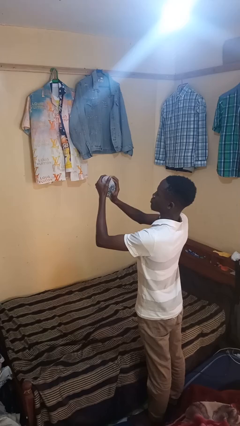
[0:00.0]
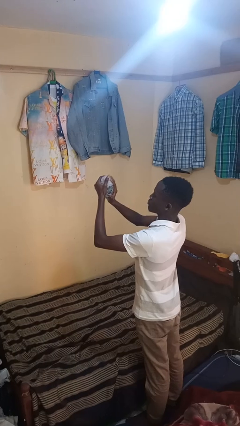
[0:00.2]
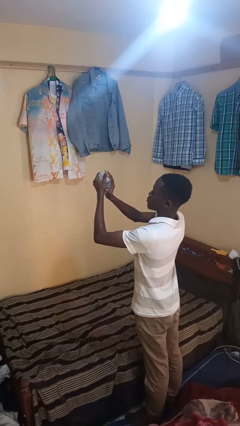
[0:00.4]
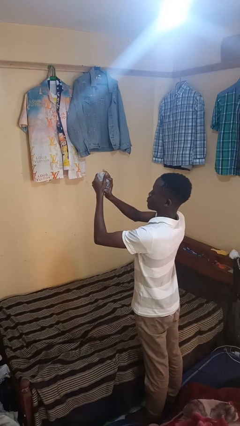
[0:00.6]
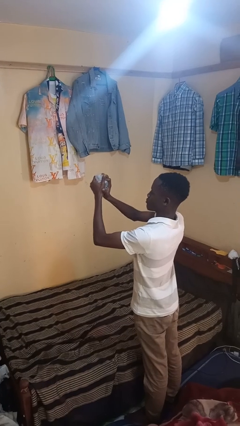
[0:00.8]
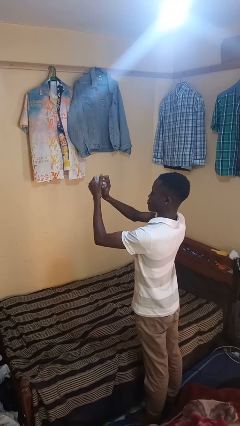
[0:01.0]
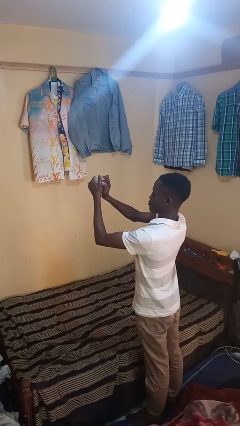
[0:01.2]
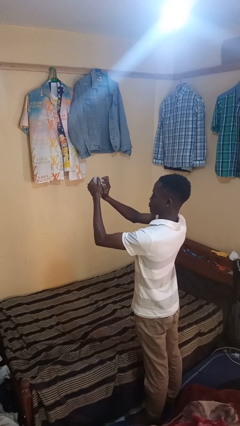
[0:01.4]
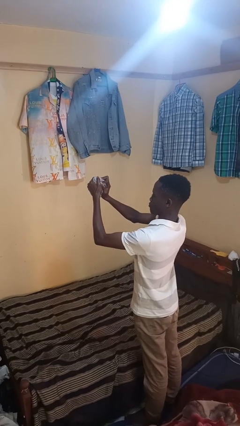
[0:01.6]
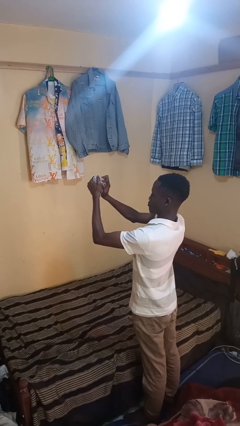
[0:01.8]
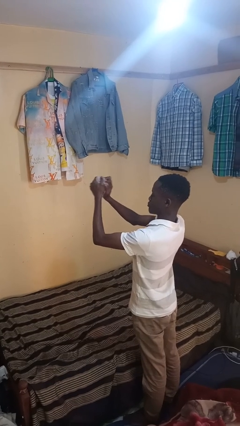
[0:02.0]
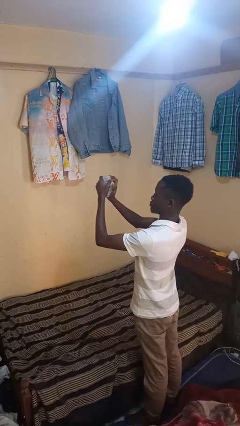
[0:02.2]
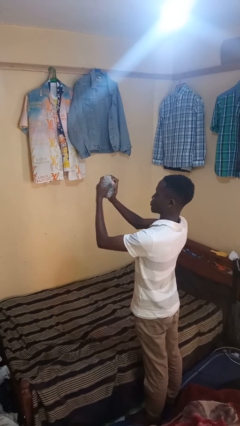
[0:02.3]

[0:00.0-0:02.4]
person squeezes object

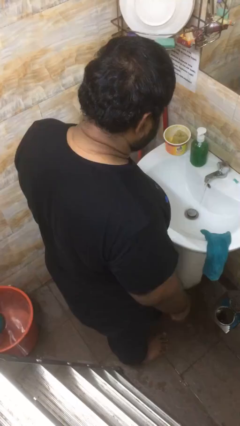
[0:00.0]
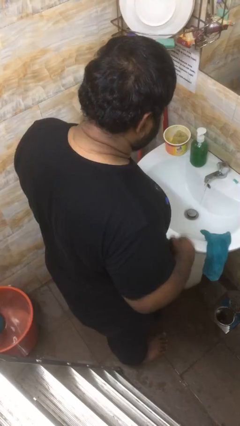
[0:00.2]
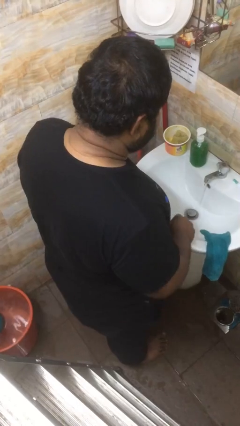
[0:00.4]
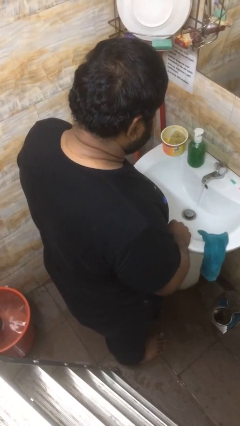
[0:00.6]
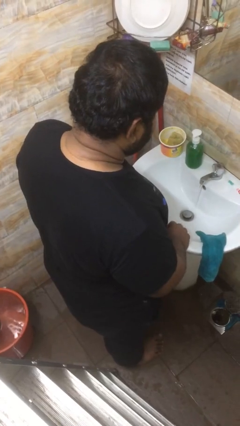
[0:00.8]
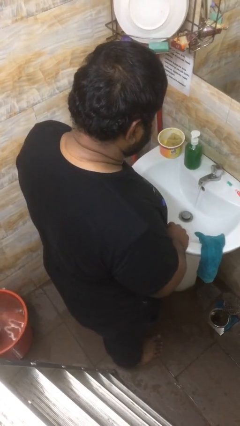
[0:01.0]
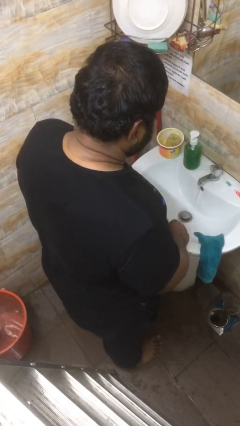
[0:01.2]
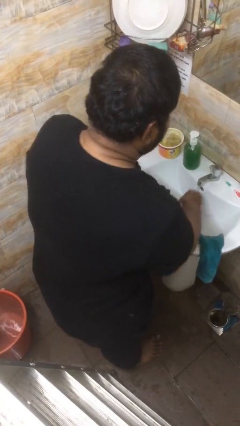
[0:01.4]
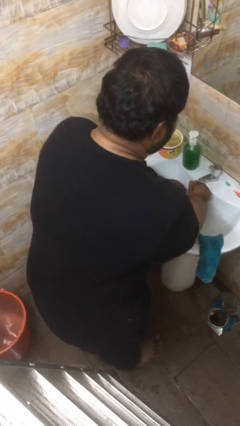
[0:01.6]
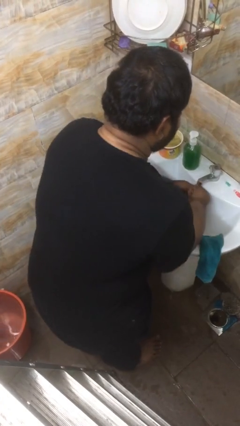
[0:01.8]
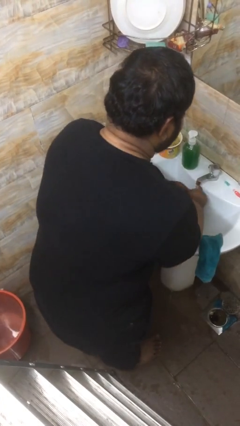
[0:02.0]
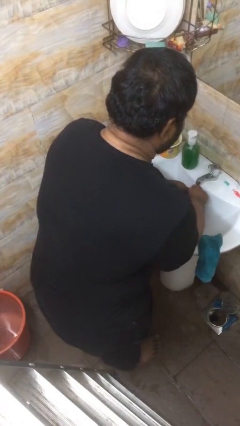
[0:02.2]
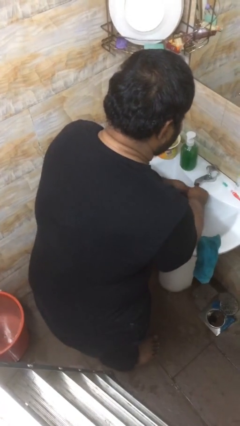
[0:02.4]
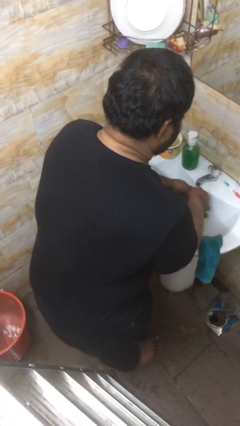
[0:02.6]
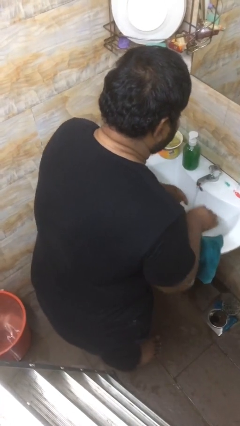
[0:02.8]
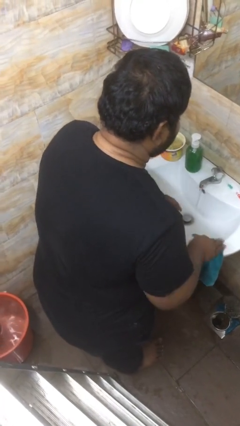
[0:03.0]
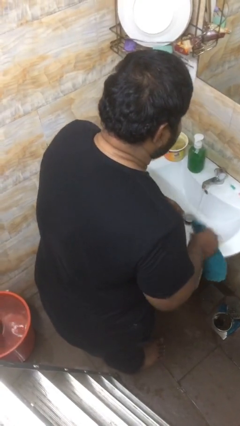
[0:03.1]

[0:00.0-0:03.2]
person washes hands

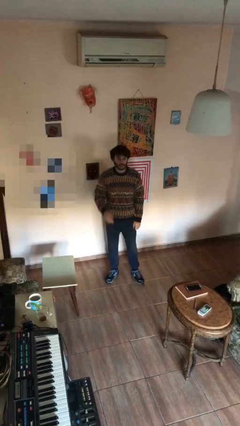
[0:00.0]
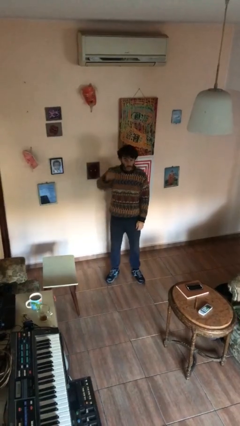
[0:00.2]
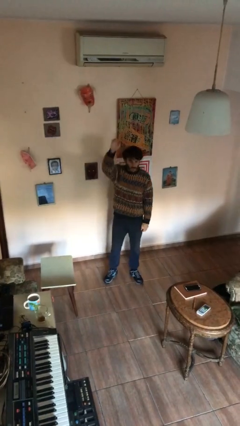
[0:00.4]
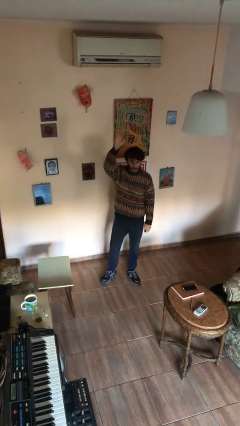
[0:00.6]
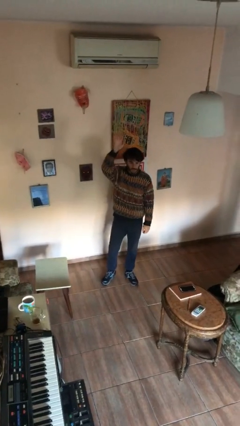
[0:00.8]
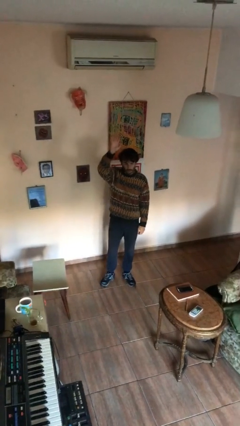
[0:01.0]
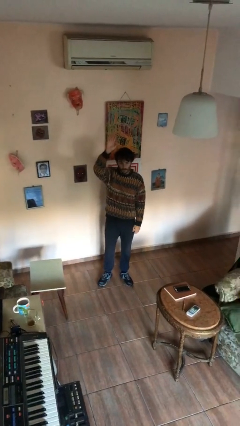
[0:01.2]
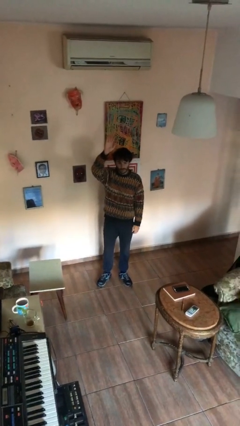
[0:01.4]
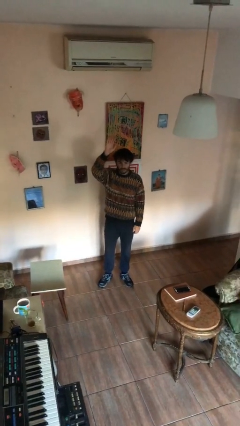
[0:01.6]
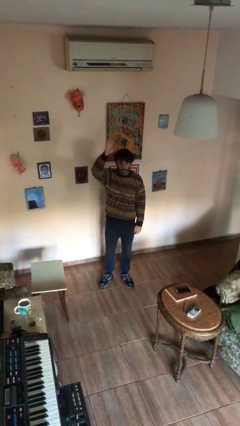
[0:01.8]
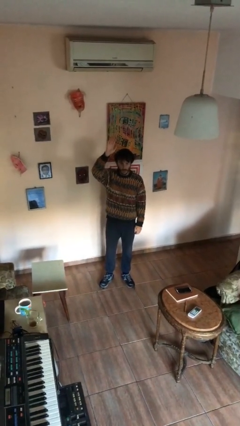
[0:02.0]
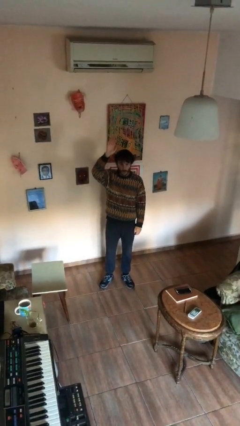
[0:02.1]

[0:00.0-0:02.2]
person gestures raise hand

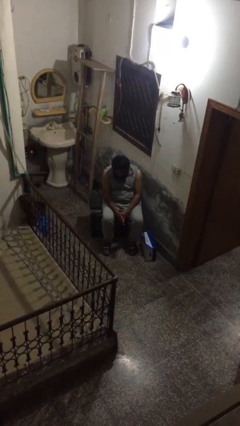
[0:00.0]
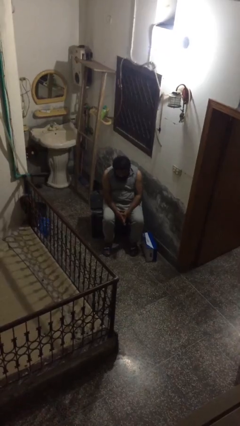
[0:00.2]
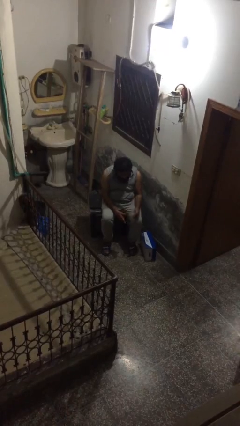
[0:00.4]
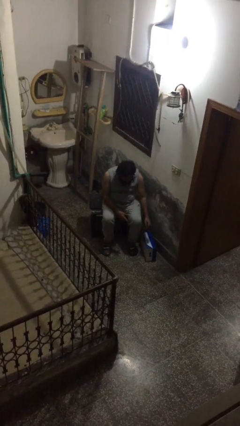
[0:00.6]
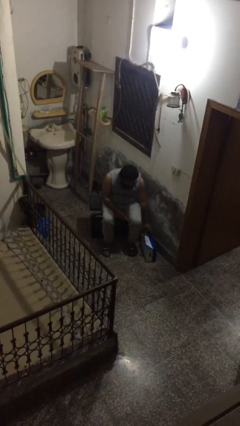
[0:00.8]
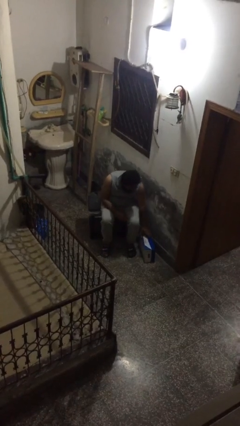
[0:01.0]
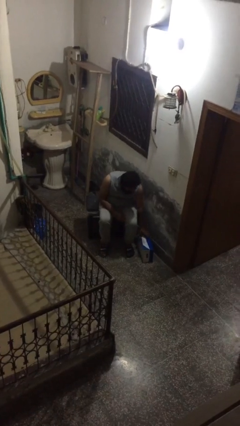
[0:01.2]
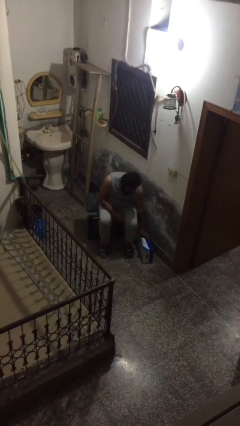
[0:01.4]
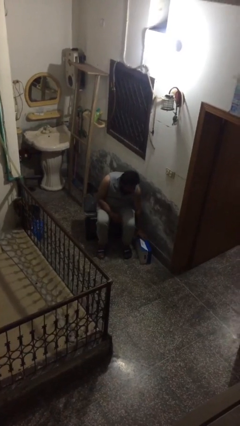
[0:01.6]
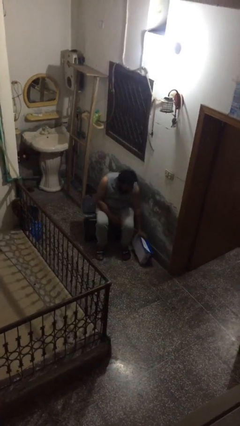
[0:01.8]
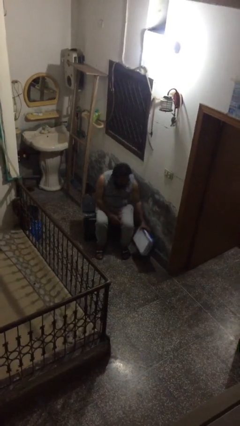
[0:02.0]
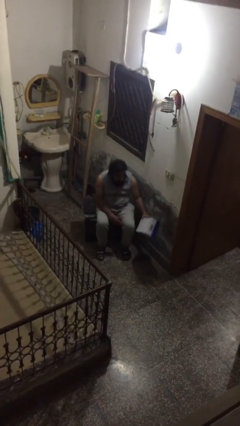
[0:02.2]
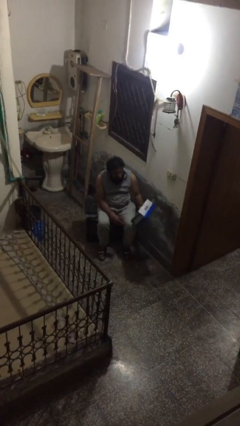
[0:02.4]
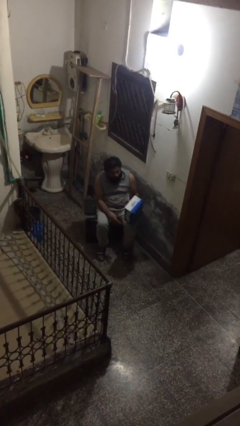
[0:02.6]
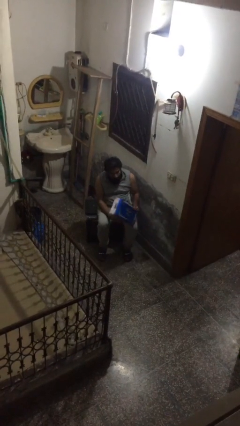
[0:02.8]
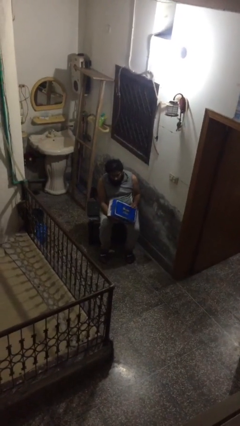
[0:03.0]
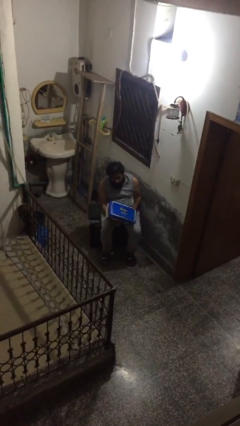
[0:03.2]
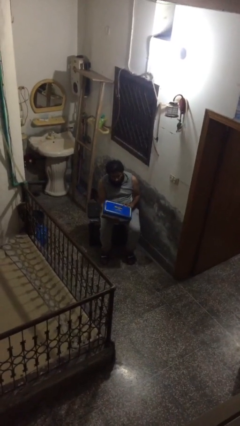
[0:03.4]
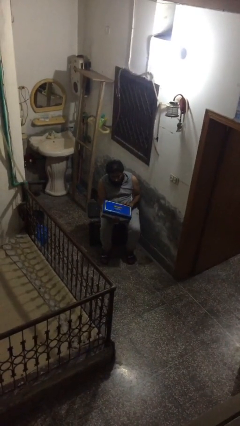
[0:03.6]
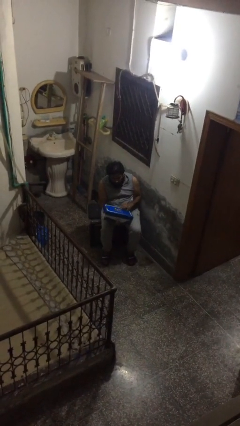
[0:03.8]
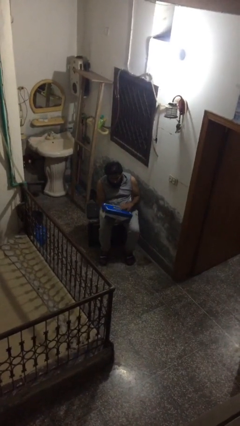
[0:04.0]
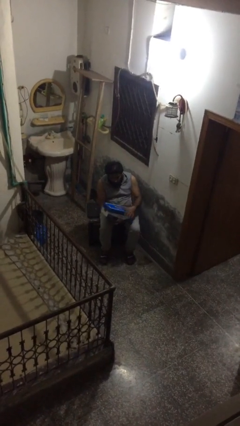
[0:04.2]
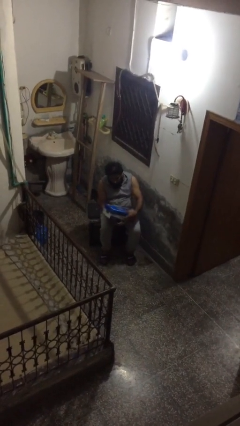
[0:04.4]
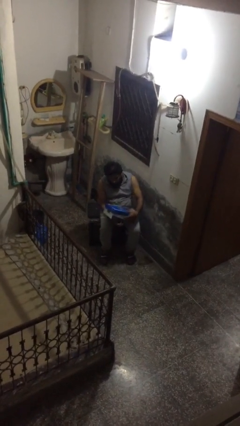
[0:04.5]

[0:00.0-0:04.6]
person picks up object from floor

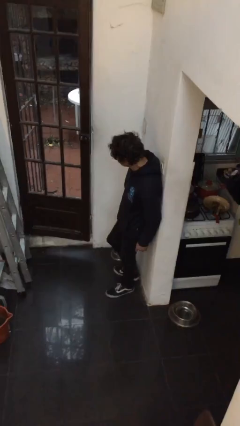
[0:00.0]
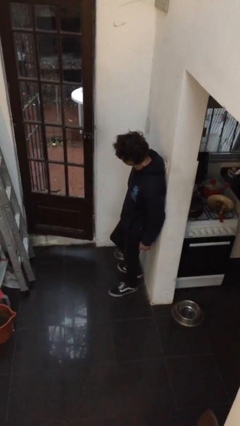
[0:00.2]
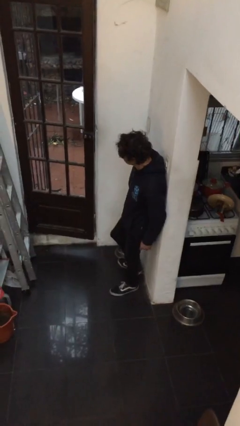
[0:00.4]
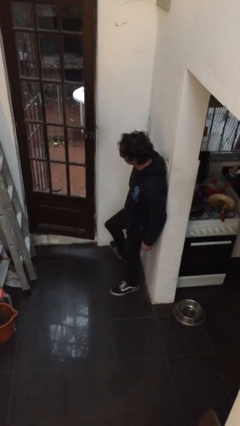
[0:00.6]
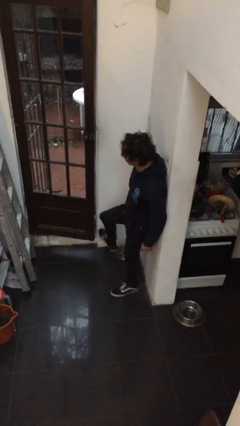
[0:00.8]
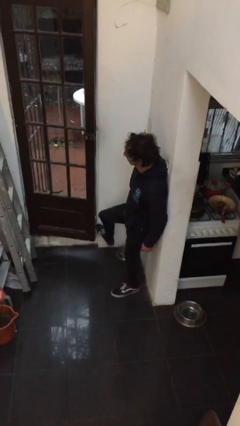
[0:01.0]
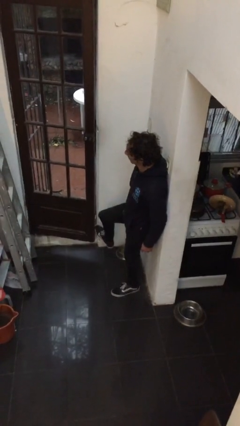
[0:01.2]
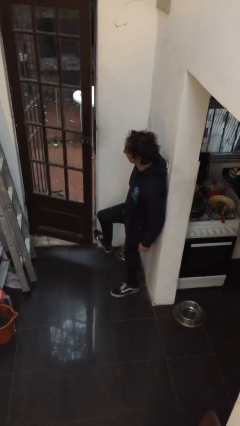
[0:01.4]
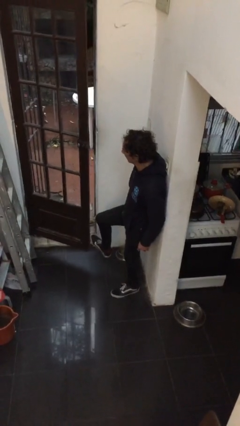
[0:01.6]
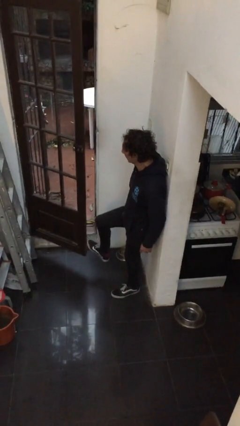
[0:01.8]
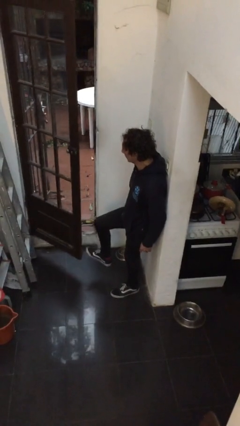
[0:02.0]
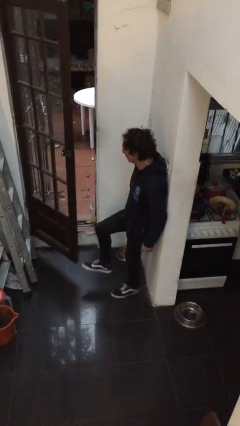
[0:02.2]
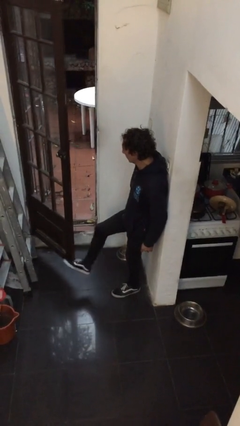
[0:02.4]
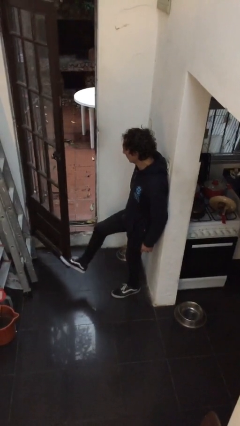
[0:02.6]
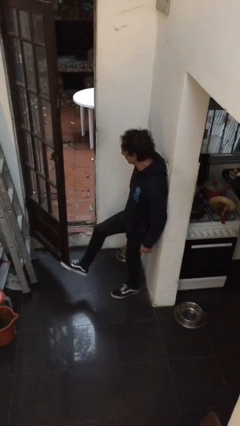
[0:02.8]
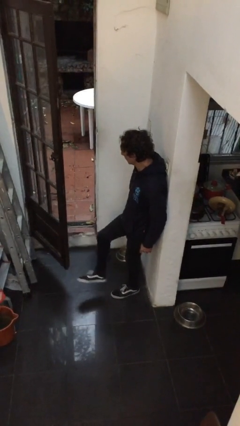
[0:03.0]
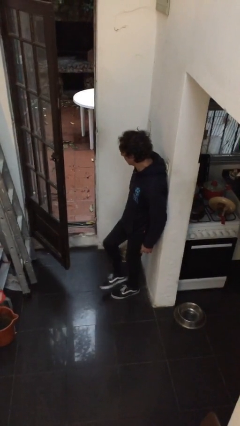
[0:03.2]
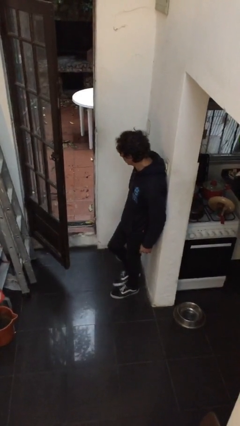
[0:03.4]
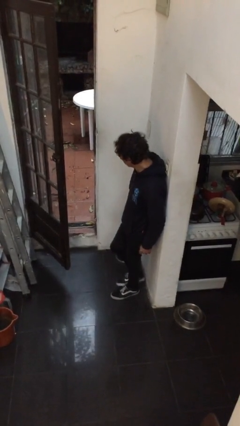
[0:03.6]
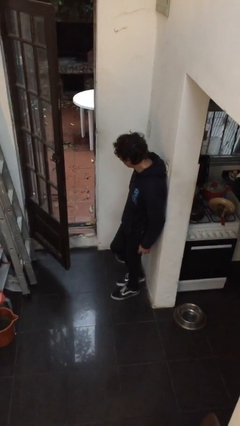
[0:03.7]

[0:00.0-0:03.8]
person opens facility door

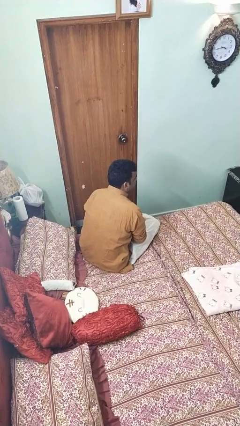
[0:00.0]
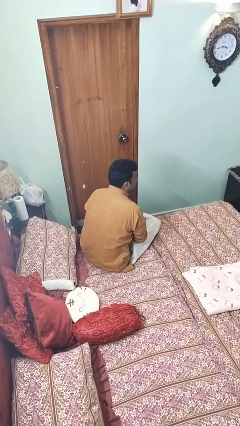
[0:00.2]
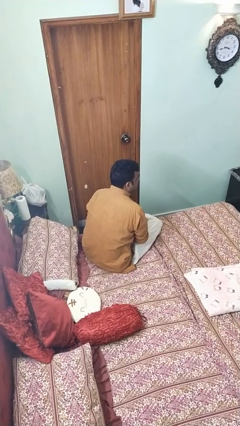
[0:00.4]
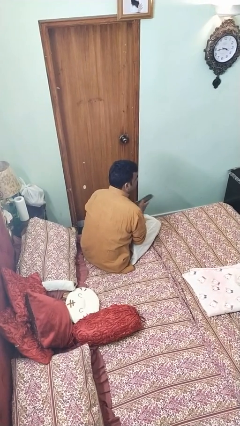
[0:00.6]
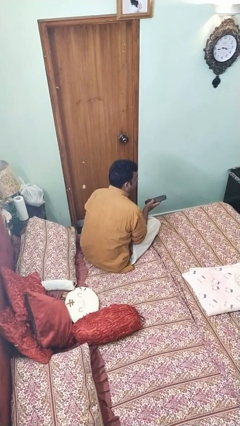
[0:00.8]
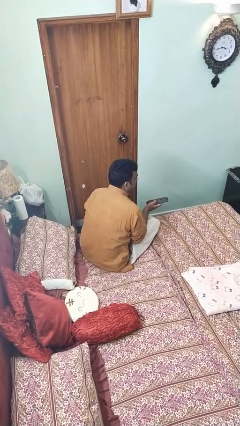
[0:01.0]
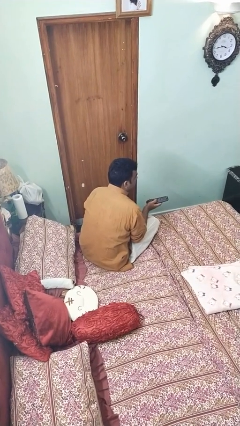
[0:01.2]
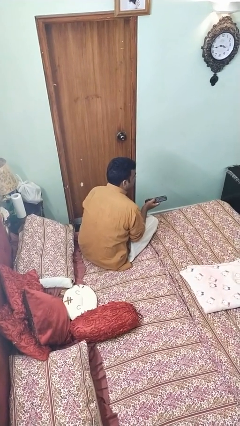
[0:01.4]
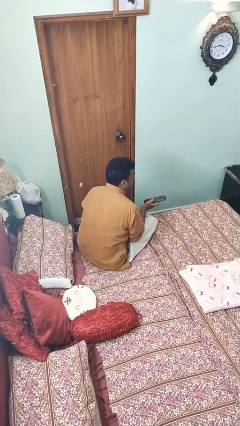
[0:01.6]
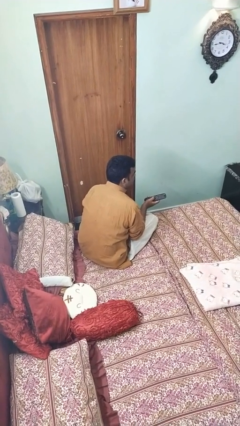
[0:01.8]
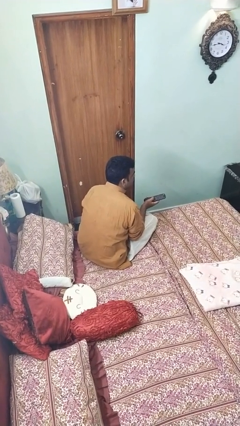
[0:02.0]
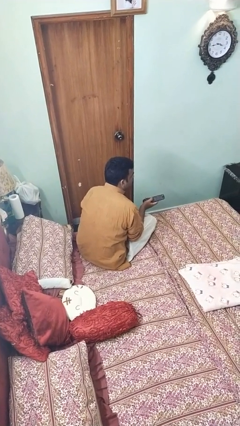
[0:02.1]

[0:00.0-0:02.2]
person uses television remote
